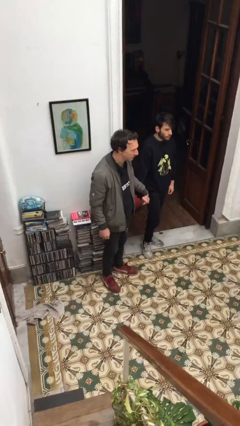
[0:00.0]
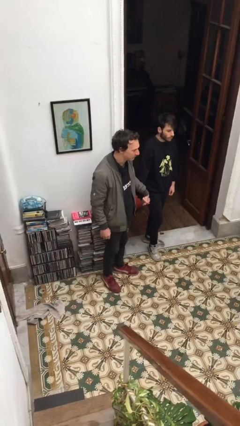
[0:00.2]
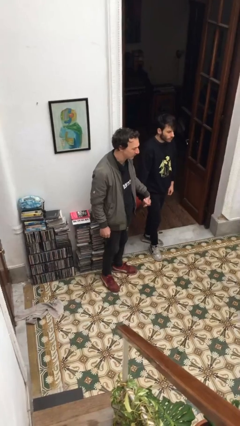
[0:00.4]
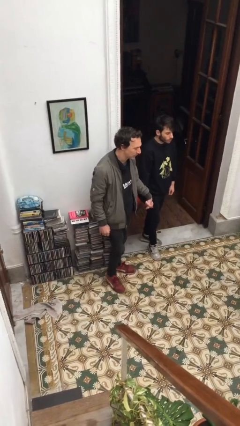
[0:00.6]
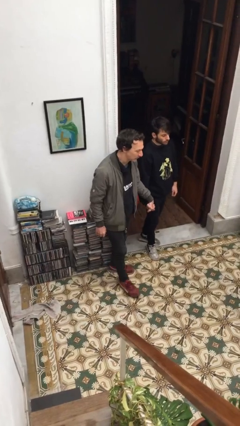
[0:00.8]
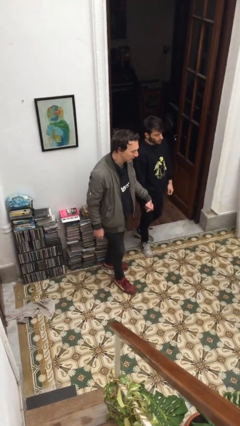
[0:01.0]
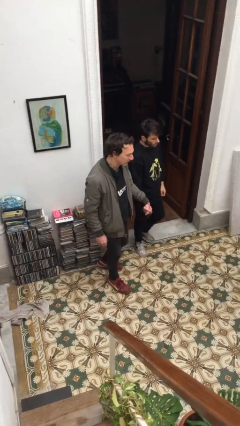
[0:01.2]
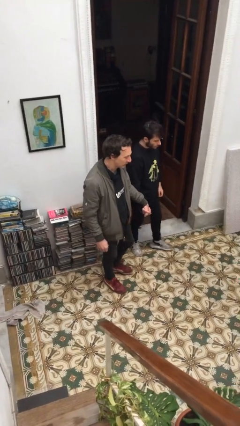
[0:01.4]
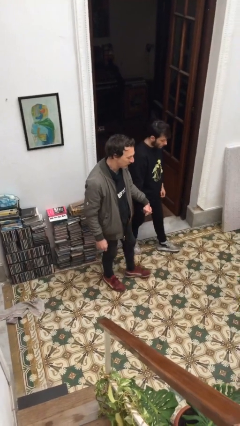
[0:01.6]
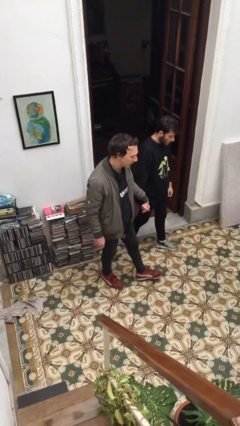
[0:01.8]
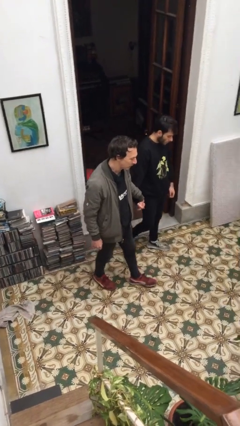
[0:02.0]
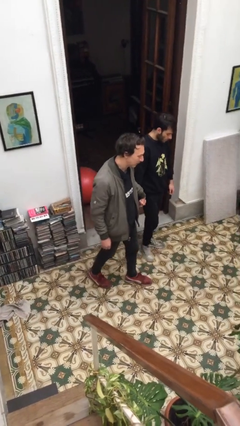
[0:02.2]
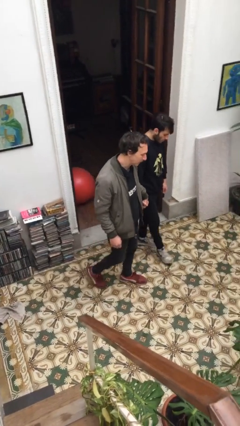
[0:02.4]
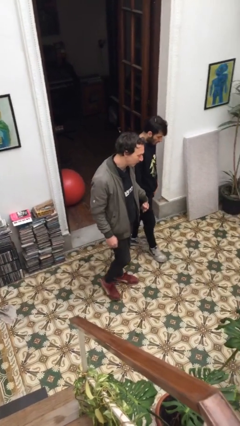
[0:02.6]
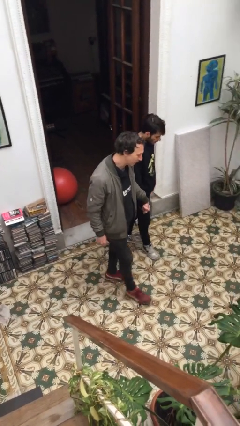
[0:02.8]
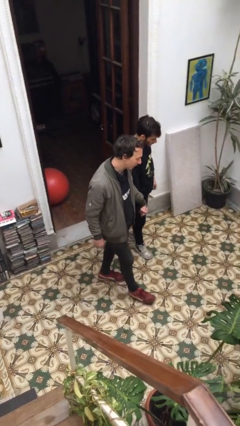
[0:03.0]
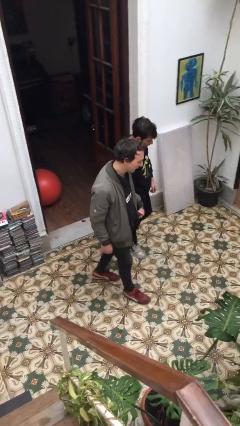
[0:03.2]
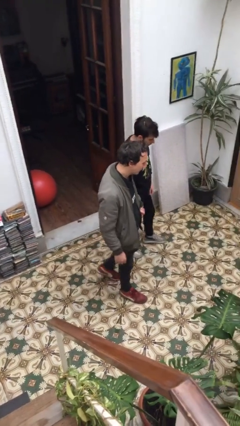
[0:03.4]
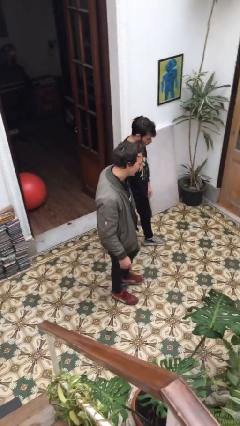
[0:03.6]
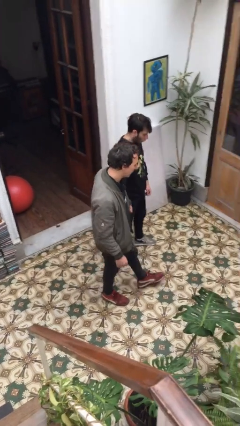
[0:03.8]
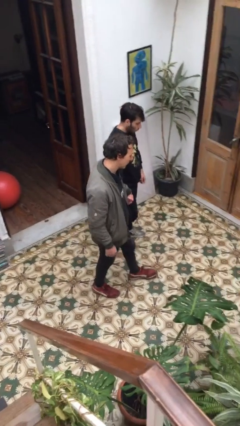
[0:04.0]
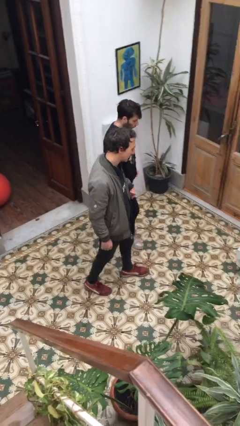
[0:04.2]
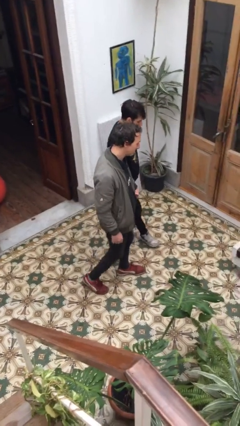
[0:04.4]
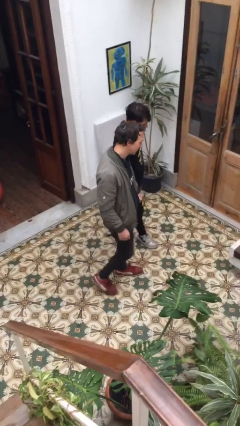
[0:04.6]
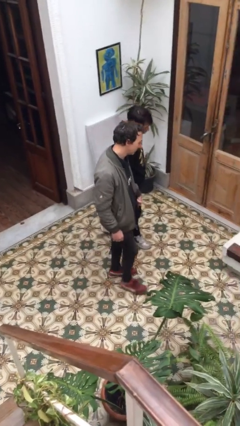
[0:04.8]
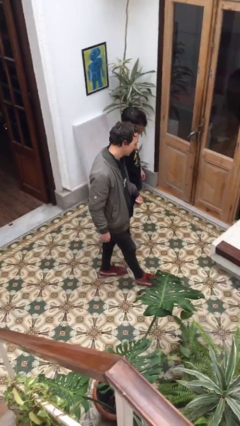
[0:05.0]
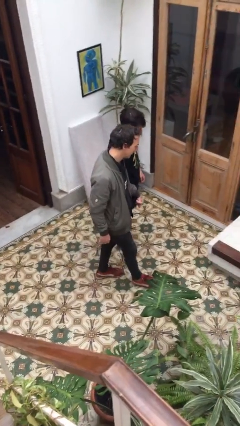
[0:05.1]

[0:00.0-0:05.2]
person holds hand

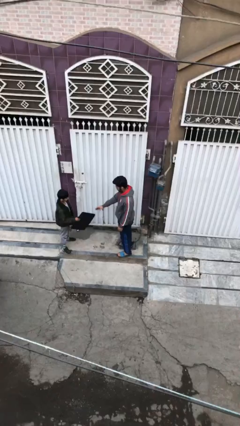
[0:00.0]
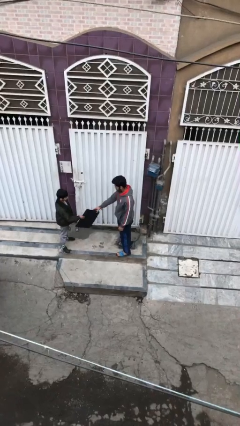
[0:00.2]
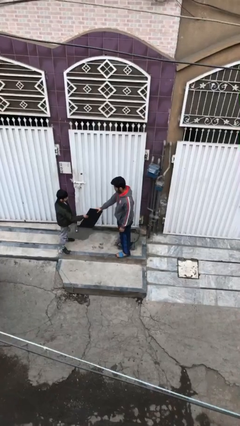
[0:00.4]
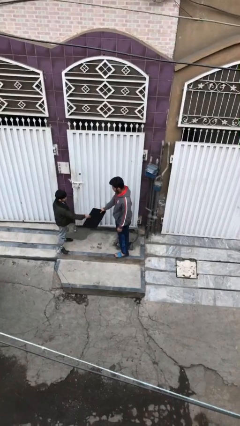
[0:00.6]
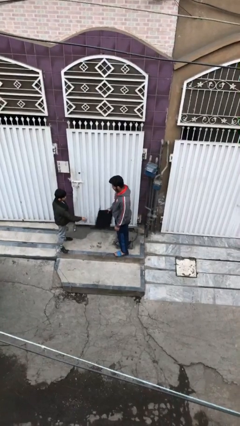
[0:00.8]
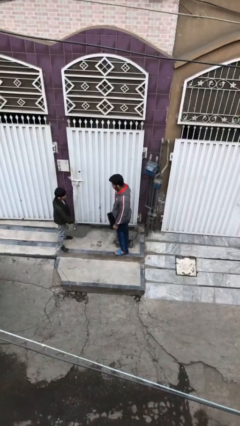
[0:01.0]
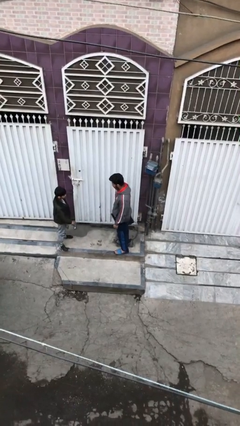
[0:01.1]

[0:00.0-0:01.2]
person transfers object to person

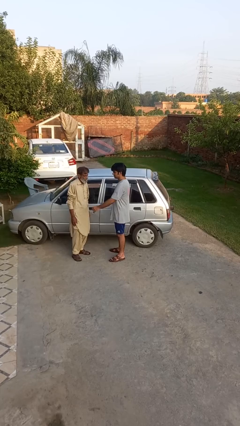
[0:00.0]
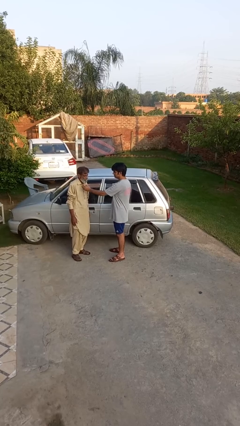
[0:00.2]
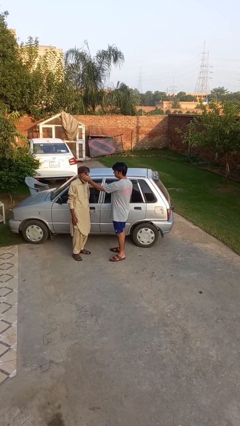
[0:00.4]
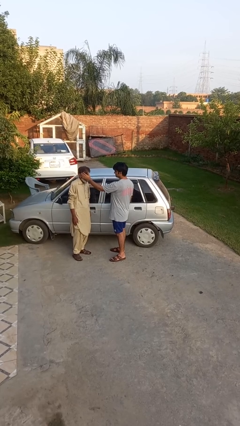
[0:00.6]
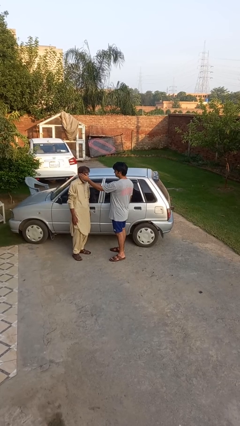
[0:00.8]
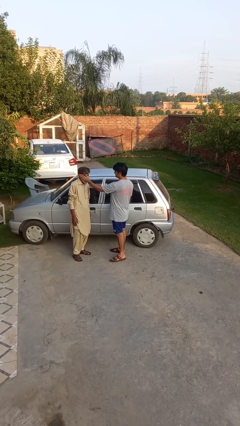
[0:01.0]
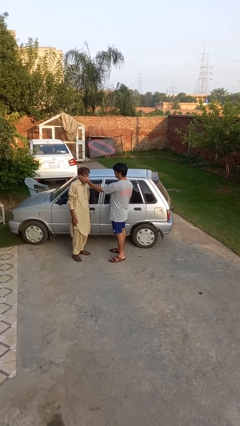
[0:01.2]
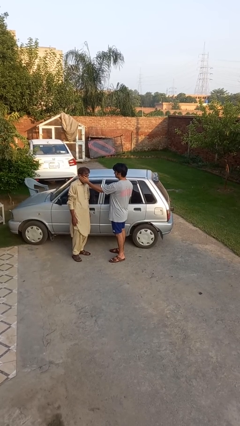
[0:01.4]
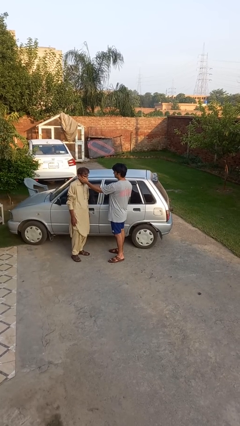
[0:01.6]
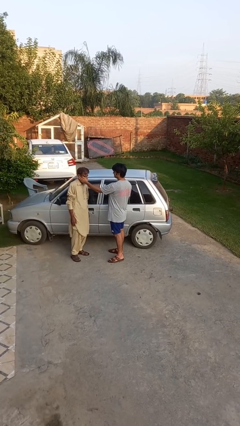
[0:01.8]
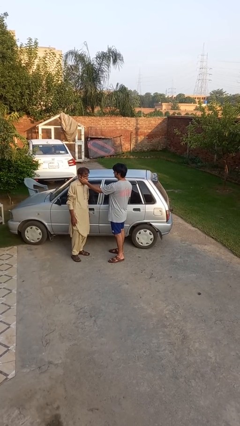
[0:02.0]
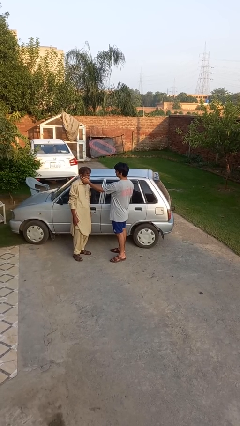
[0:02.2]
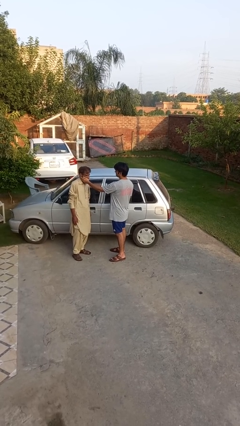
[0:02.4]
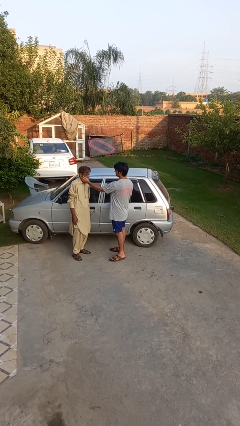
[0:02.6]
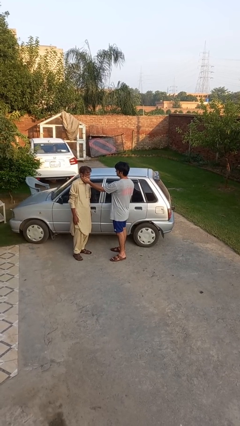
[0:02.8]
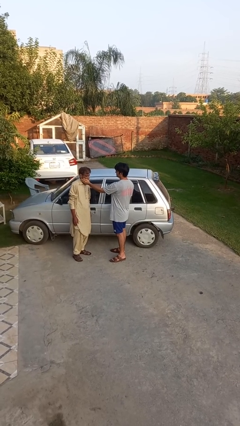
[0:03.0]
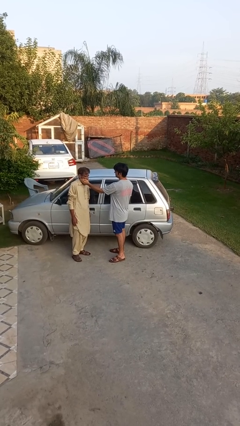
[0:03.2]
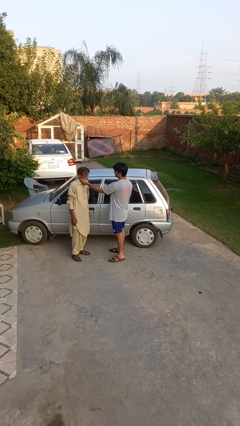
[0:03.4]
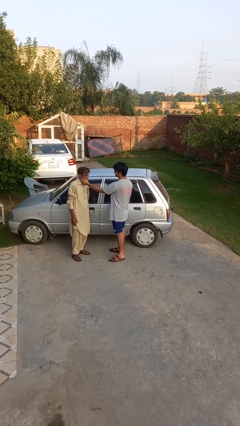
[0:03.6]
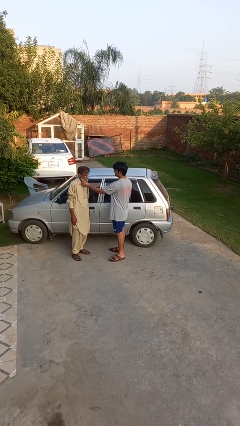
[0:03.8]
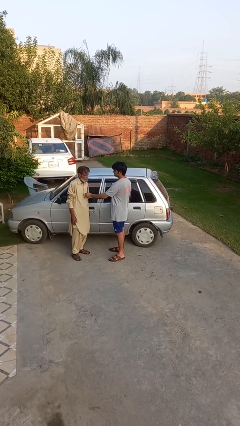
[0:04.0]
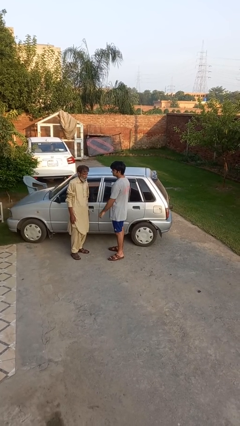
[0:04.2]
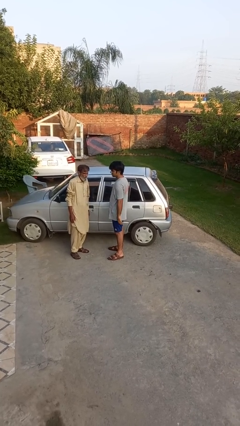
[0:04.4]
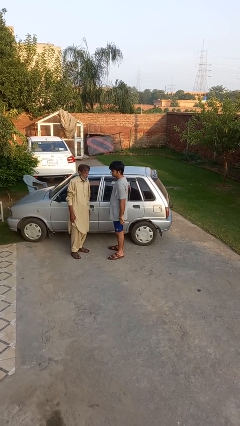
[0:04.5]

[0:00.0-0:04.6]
person touches face of person

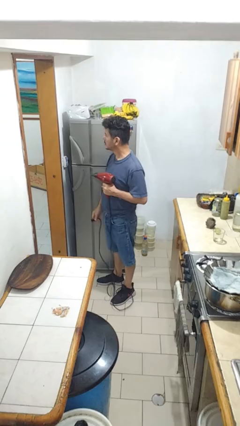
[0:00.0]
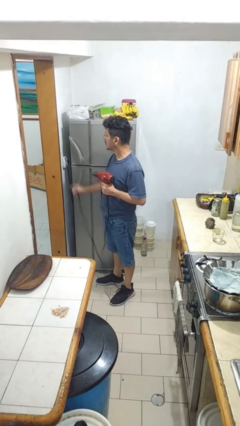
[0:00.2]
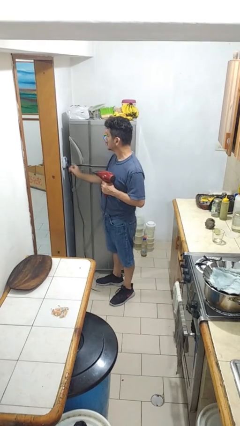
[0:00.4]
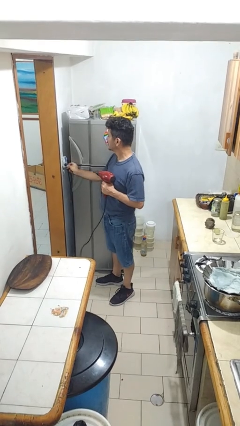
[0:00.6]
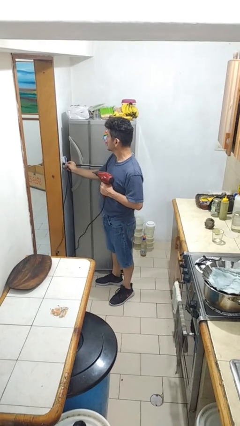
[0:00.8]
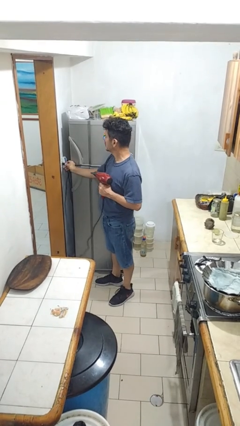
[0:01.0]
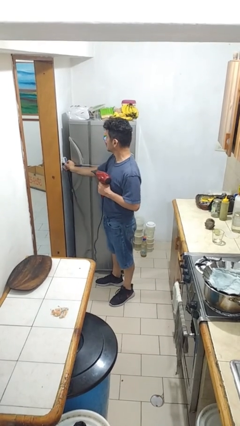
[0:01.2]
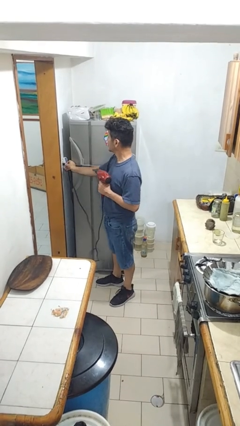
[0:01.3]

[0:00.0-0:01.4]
person plugs into electrical socket

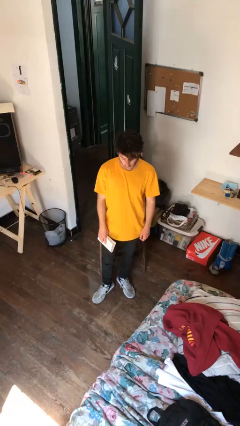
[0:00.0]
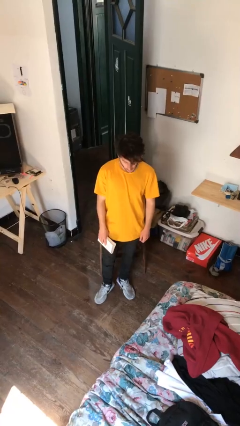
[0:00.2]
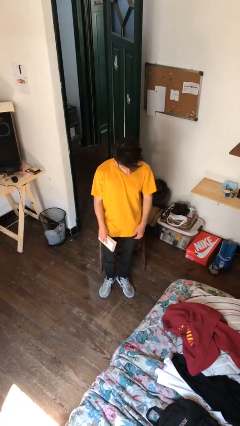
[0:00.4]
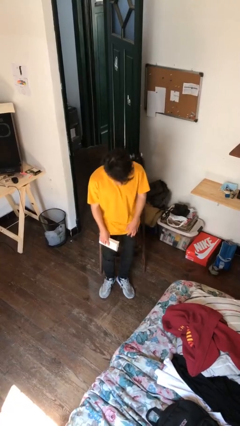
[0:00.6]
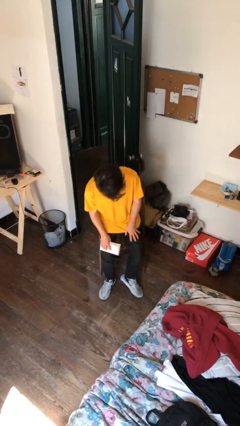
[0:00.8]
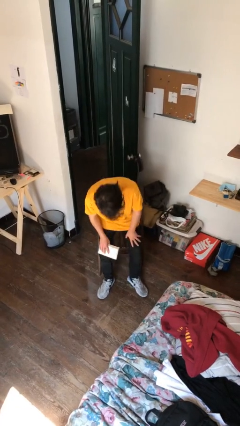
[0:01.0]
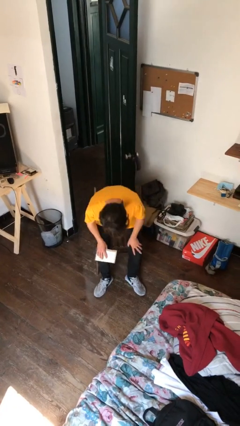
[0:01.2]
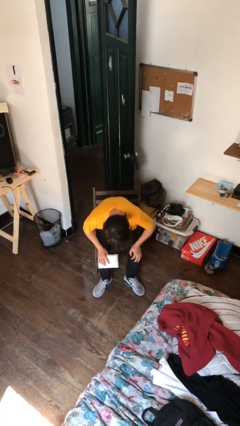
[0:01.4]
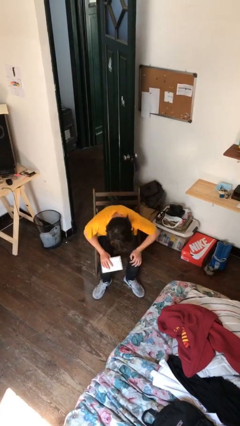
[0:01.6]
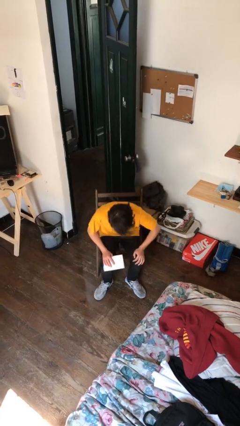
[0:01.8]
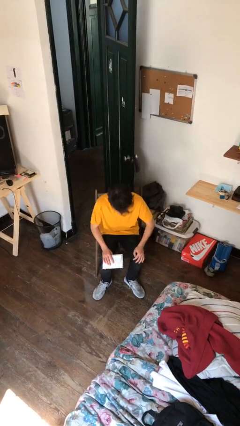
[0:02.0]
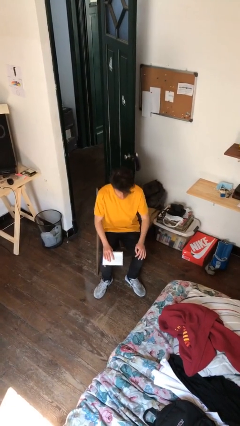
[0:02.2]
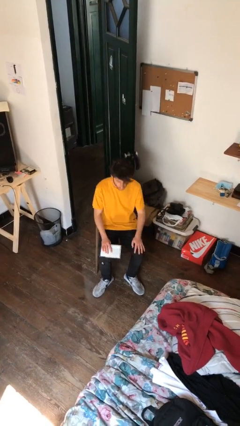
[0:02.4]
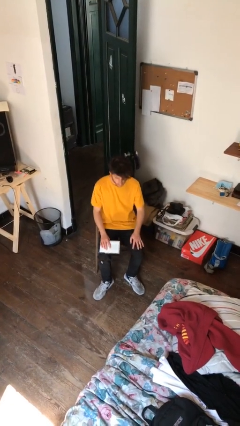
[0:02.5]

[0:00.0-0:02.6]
person sits down

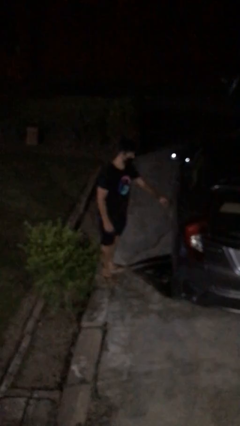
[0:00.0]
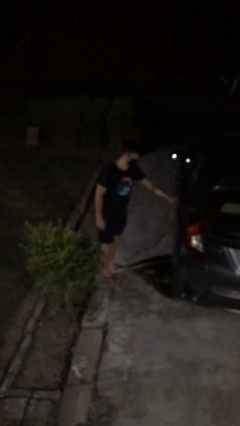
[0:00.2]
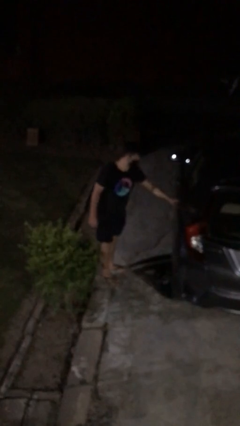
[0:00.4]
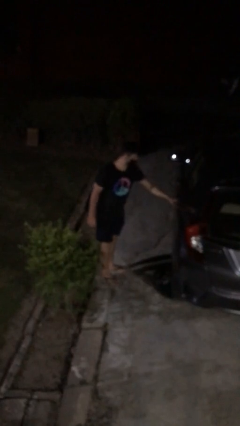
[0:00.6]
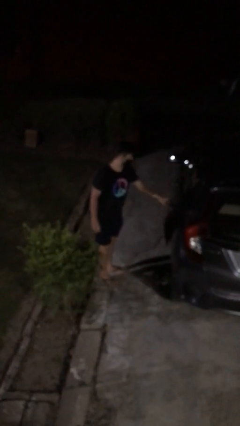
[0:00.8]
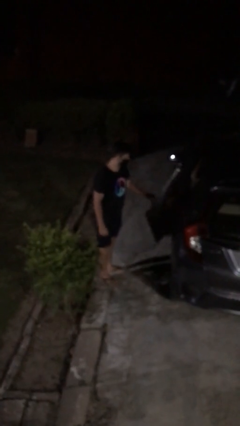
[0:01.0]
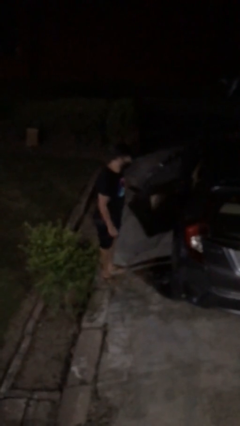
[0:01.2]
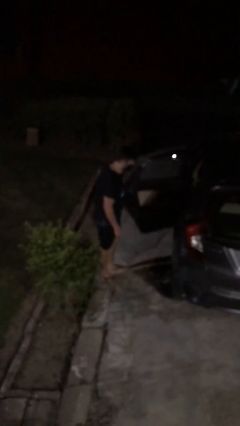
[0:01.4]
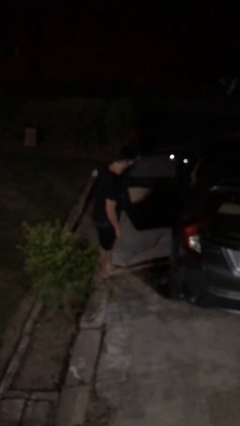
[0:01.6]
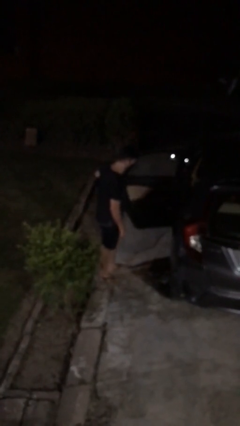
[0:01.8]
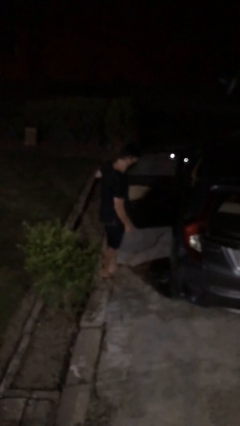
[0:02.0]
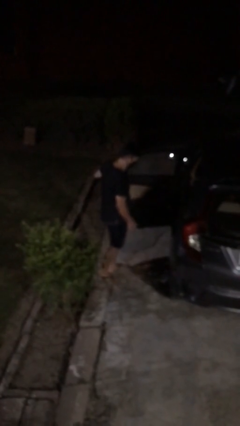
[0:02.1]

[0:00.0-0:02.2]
person opens car door
